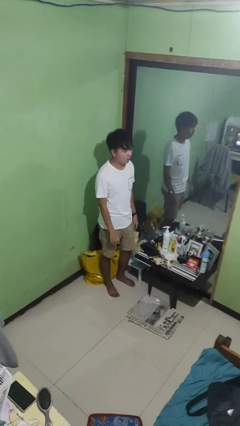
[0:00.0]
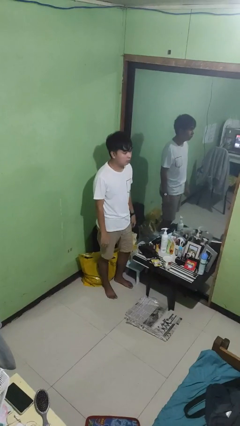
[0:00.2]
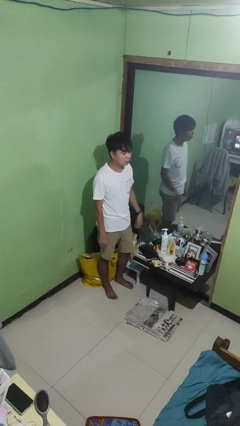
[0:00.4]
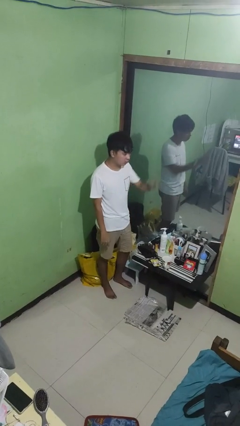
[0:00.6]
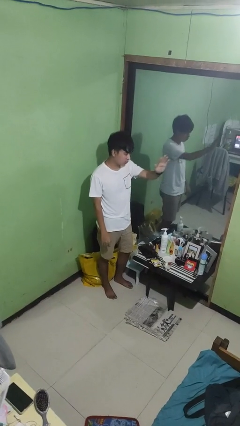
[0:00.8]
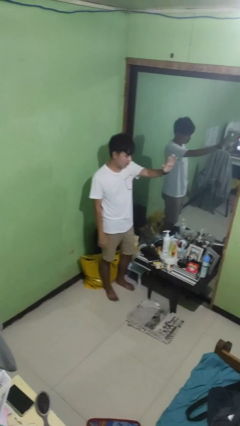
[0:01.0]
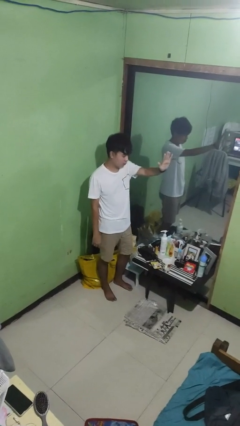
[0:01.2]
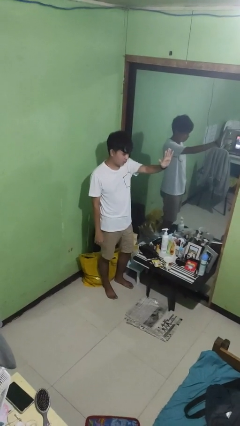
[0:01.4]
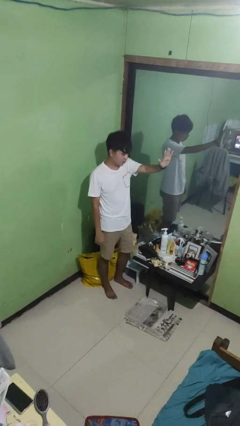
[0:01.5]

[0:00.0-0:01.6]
person gestures stop

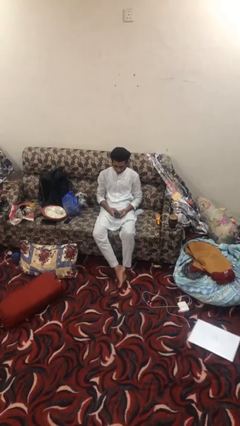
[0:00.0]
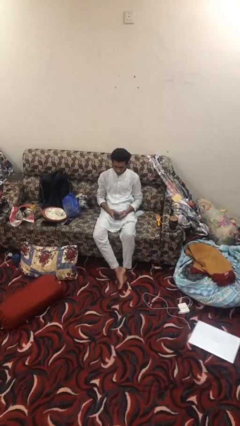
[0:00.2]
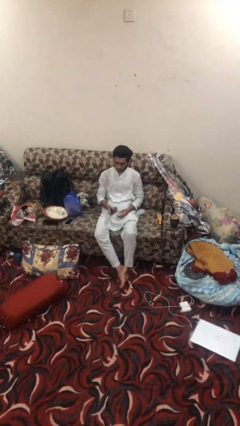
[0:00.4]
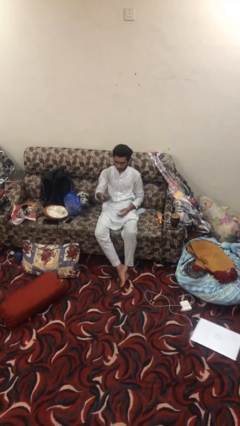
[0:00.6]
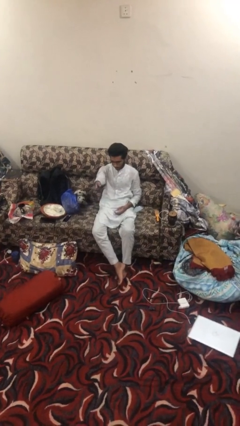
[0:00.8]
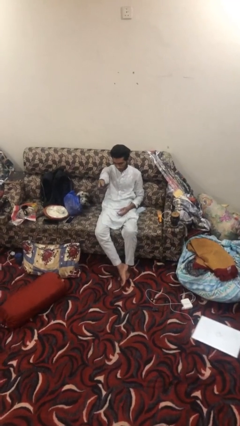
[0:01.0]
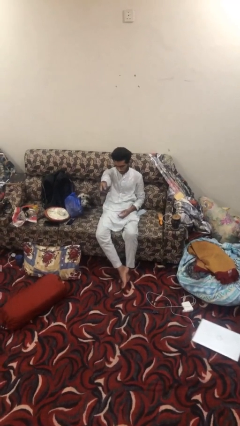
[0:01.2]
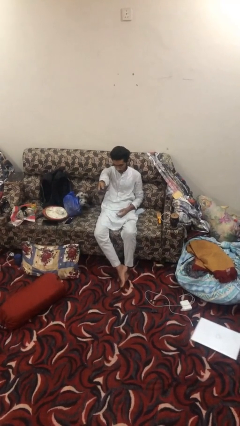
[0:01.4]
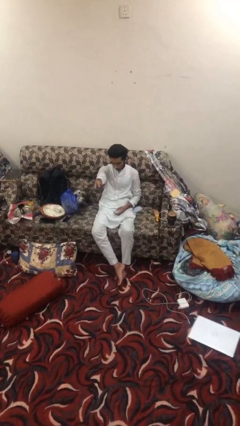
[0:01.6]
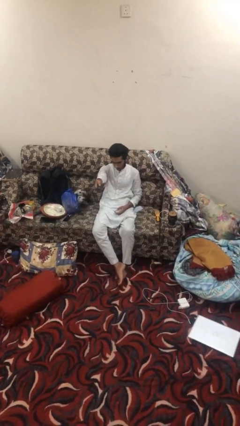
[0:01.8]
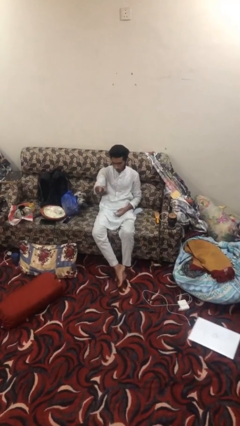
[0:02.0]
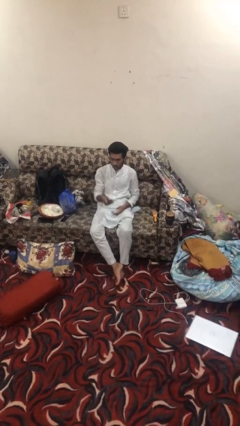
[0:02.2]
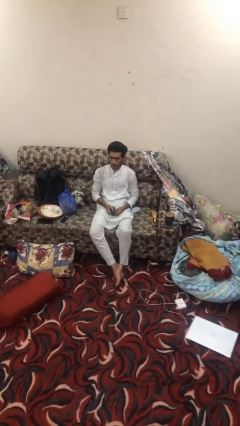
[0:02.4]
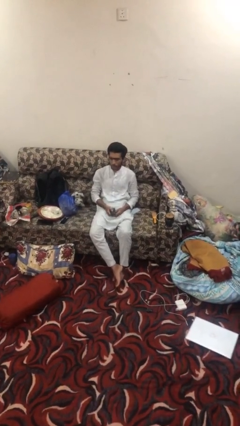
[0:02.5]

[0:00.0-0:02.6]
person uses television remote

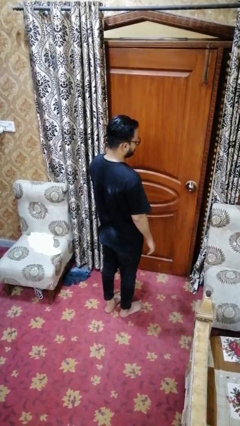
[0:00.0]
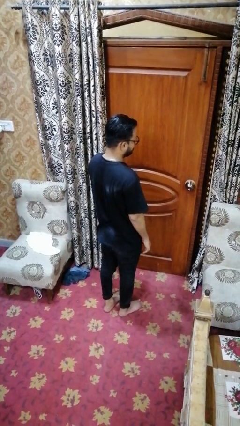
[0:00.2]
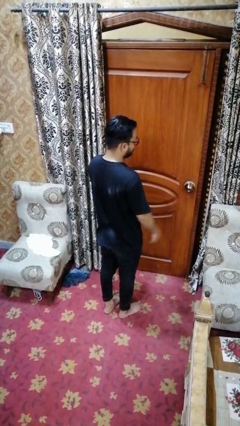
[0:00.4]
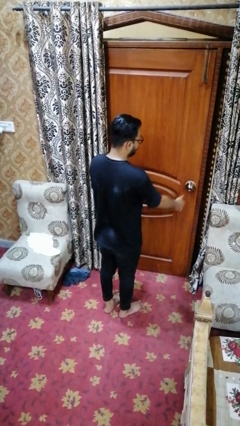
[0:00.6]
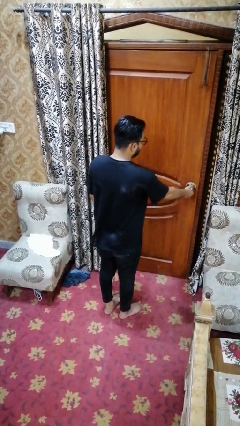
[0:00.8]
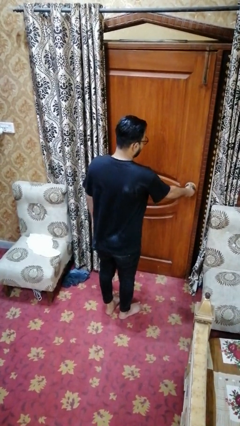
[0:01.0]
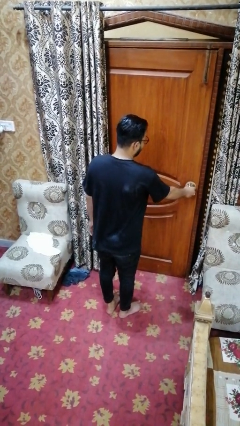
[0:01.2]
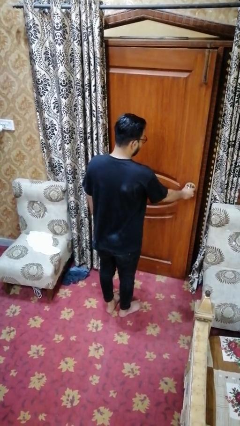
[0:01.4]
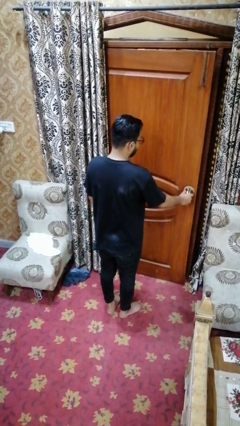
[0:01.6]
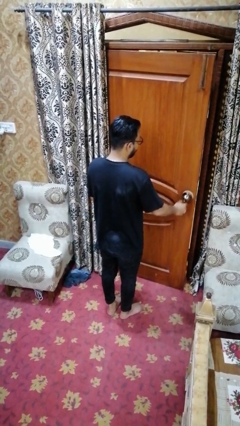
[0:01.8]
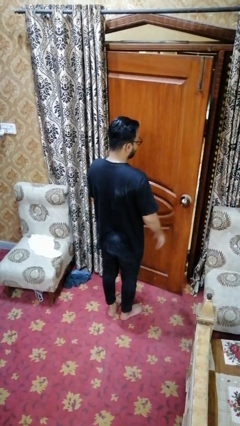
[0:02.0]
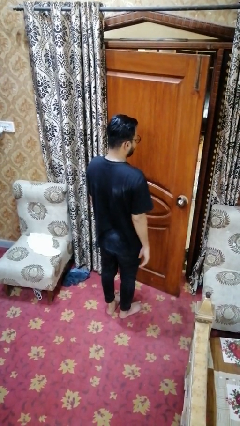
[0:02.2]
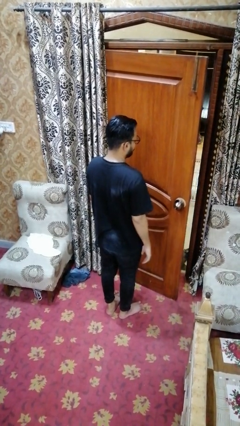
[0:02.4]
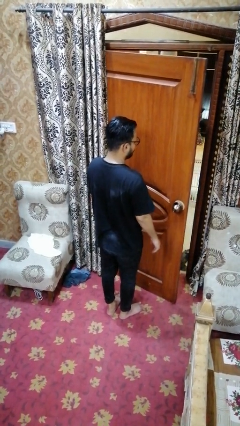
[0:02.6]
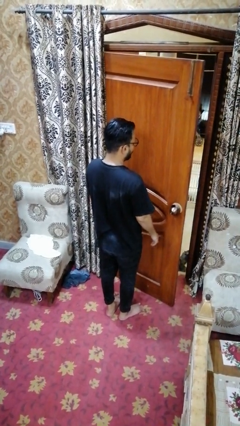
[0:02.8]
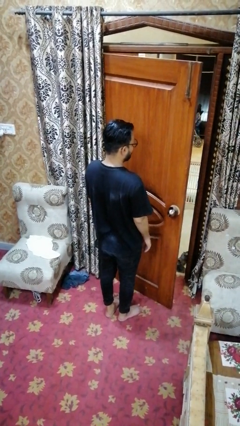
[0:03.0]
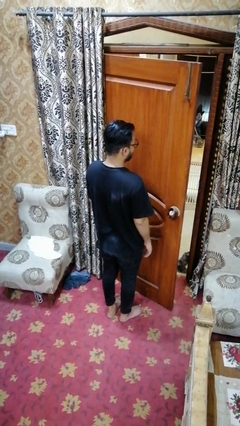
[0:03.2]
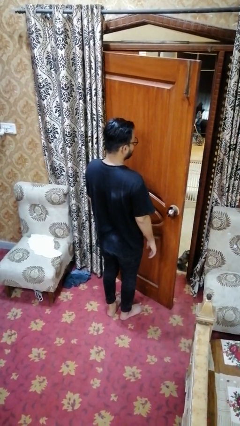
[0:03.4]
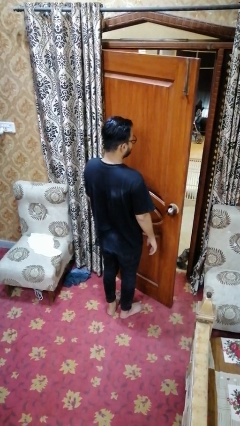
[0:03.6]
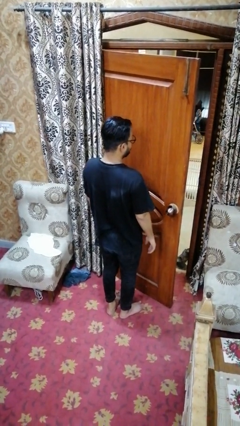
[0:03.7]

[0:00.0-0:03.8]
person opens facility door

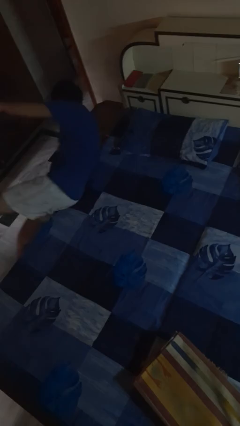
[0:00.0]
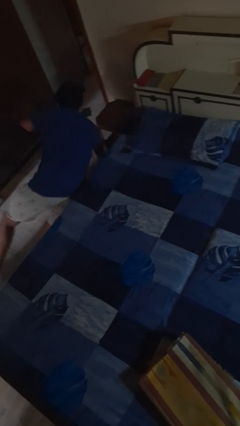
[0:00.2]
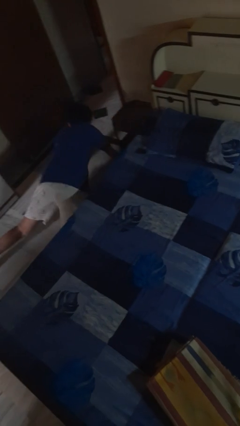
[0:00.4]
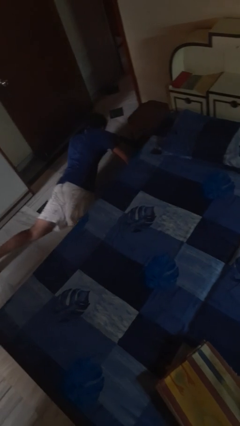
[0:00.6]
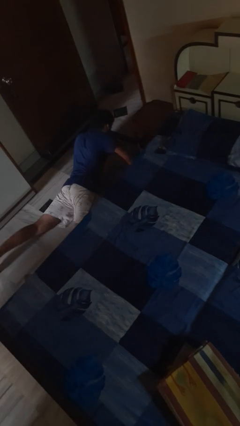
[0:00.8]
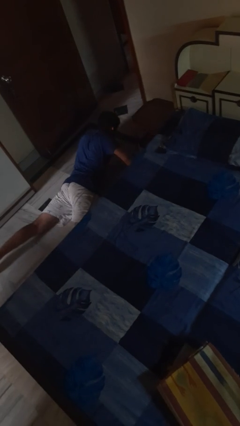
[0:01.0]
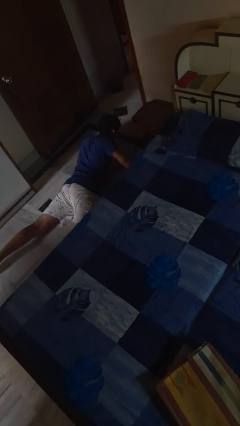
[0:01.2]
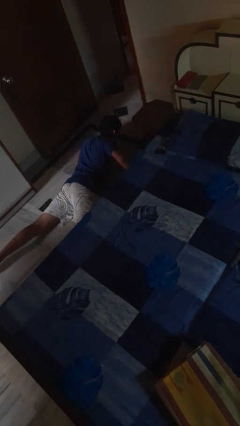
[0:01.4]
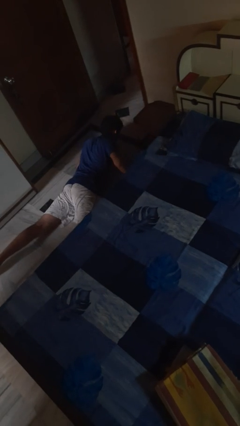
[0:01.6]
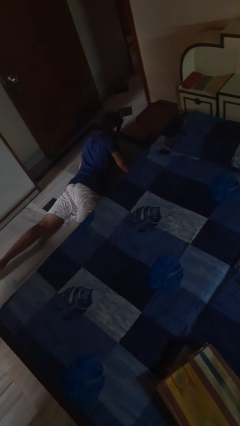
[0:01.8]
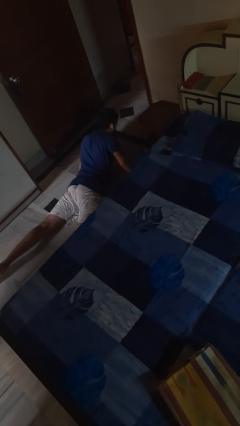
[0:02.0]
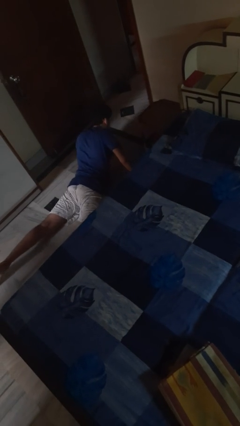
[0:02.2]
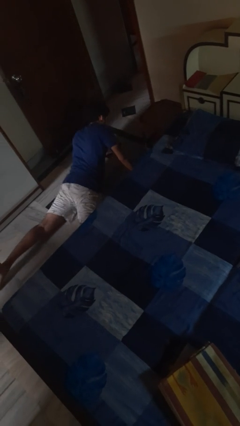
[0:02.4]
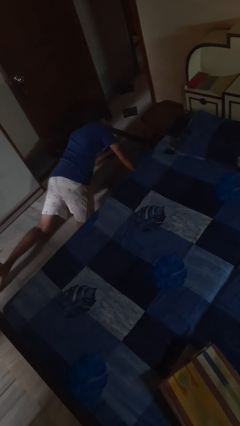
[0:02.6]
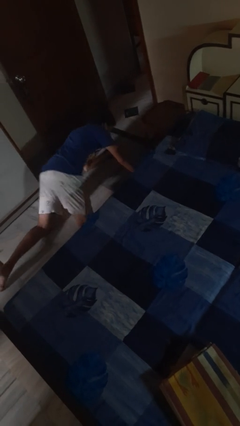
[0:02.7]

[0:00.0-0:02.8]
person falls from bed

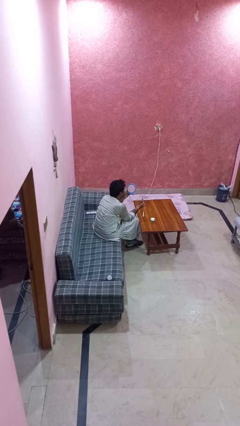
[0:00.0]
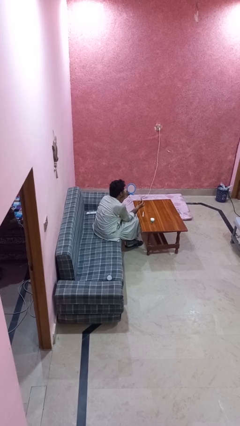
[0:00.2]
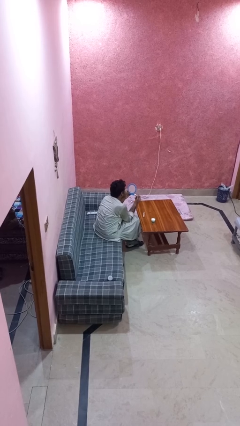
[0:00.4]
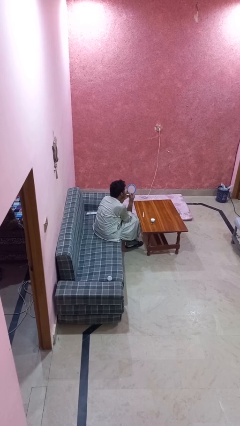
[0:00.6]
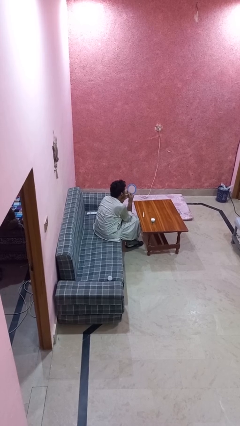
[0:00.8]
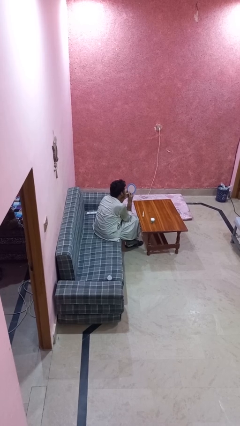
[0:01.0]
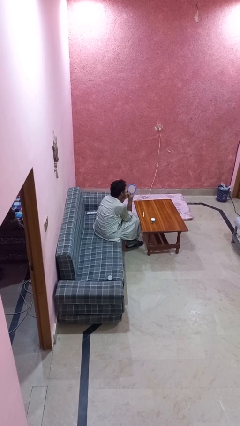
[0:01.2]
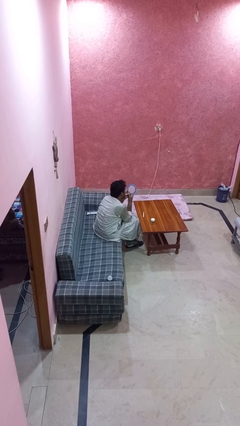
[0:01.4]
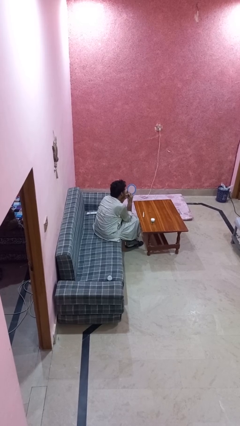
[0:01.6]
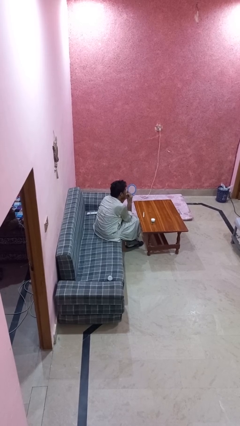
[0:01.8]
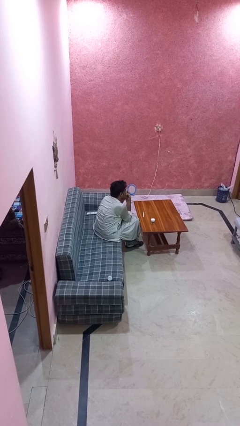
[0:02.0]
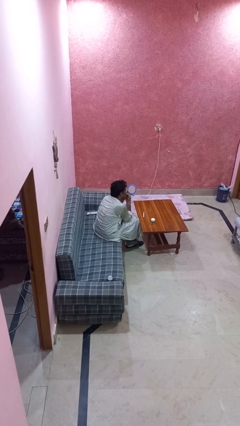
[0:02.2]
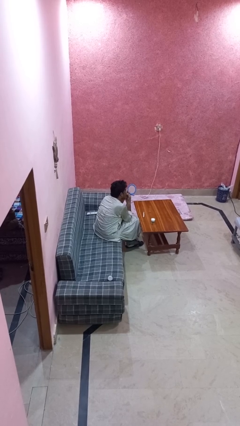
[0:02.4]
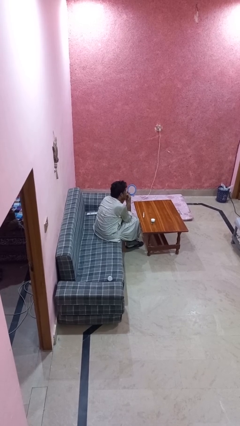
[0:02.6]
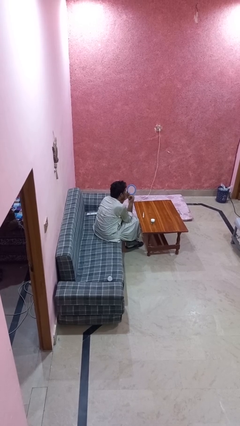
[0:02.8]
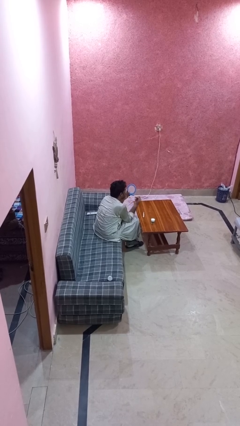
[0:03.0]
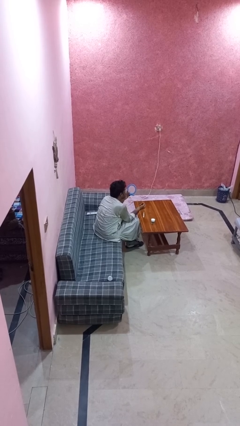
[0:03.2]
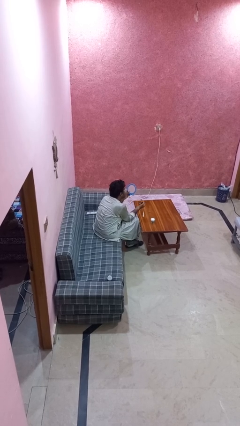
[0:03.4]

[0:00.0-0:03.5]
person applies lip makeup

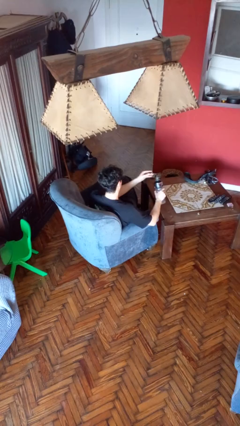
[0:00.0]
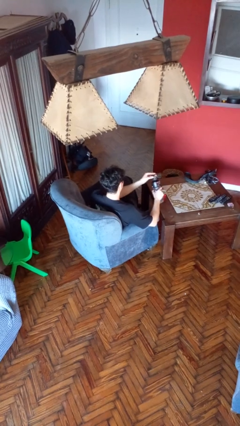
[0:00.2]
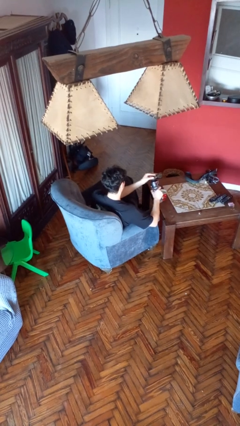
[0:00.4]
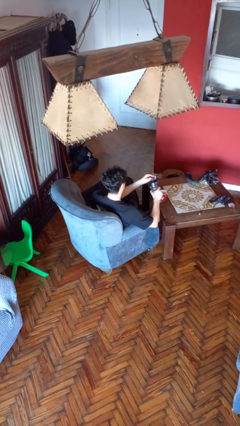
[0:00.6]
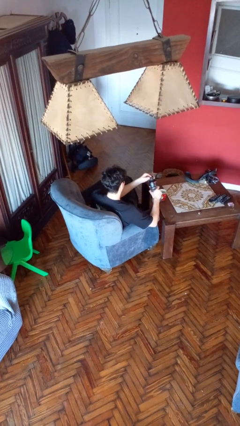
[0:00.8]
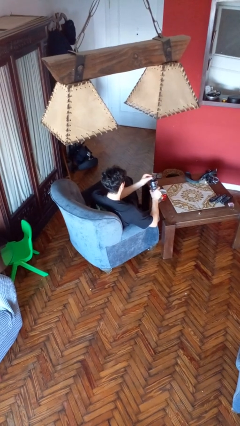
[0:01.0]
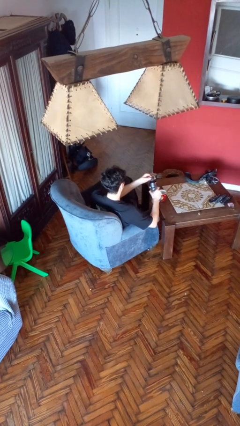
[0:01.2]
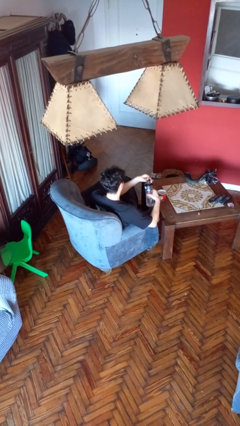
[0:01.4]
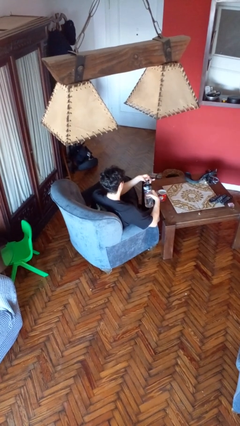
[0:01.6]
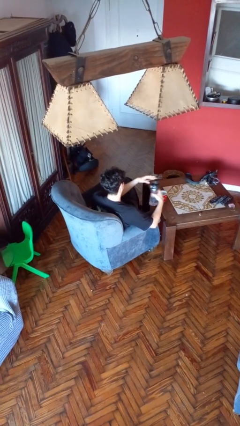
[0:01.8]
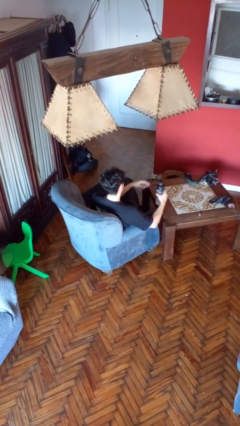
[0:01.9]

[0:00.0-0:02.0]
person screws lid to bottle

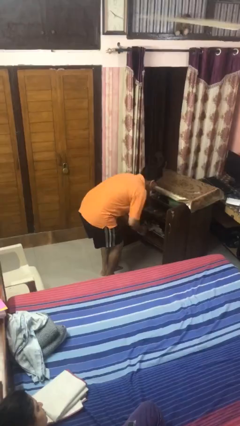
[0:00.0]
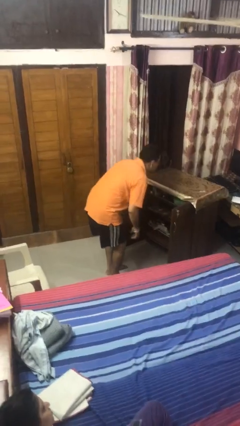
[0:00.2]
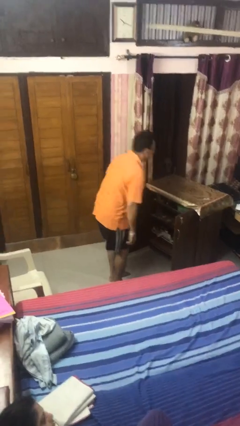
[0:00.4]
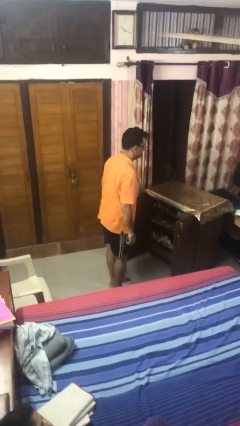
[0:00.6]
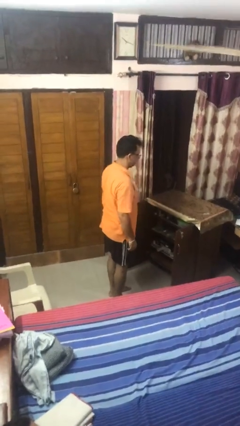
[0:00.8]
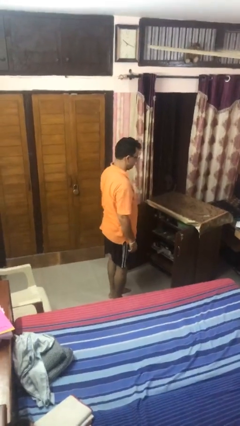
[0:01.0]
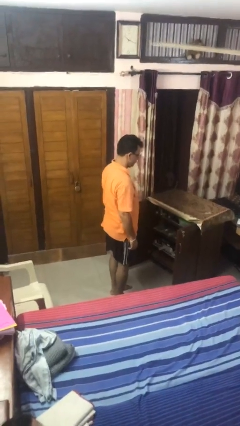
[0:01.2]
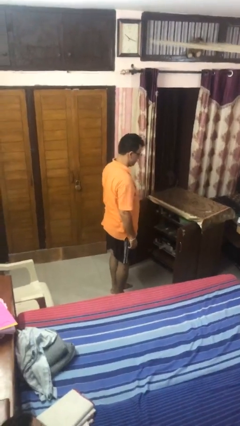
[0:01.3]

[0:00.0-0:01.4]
person searches in cabinet
